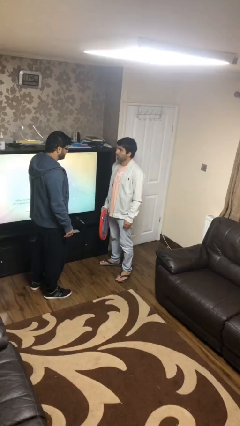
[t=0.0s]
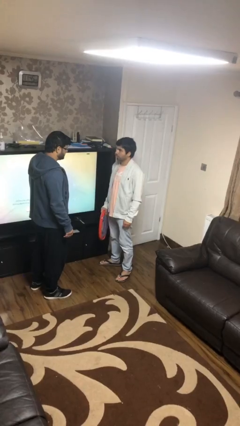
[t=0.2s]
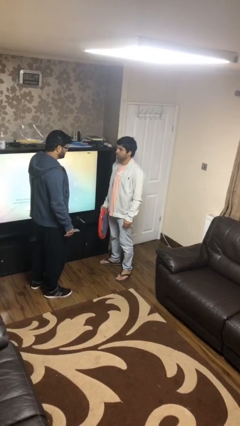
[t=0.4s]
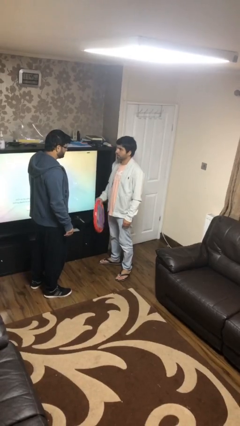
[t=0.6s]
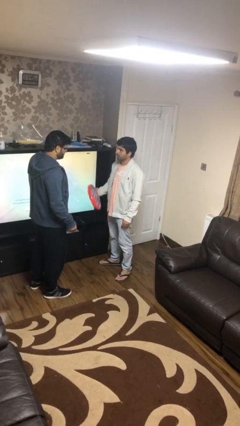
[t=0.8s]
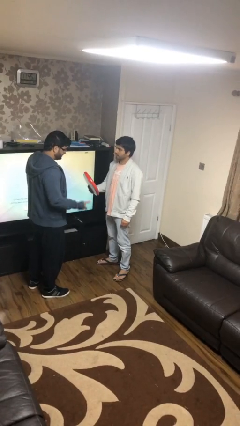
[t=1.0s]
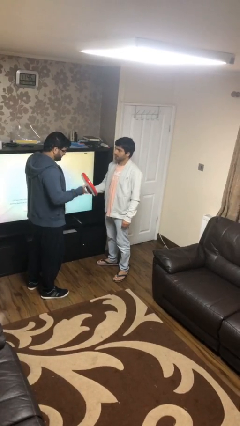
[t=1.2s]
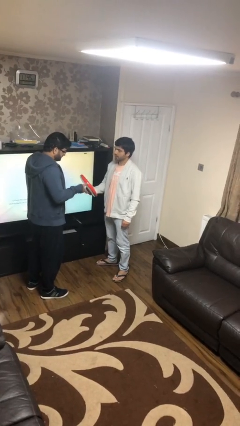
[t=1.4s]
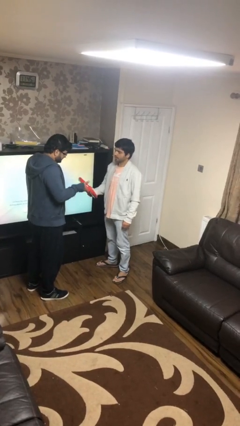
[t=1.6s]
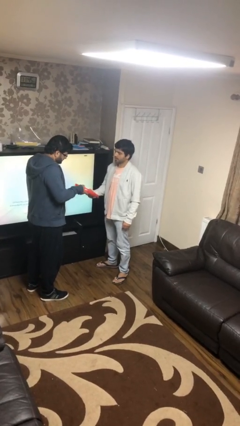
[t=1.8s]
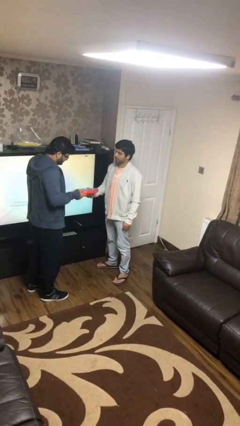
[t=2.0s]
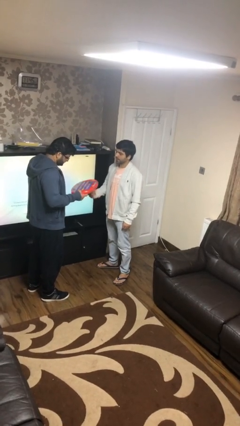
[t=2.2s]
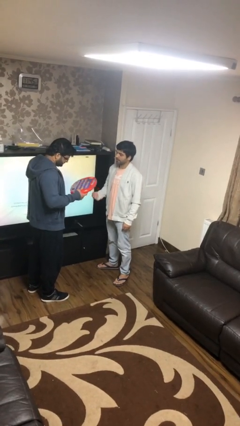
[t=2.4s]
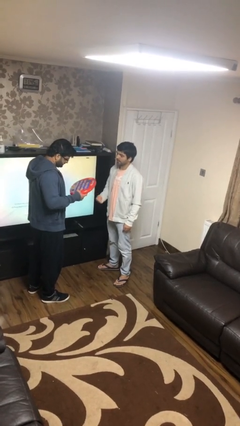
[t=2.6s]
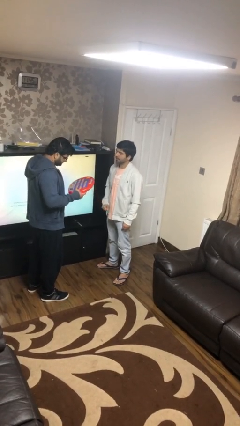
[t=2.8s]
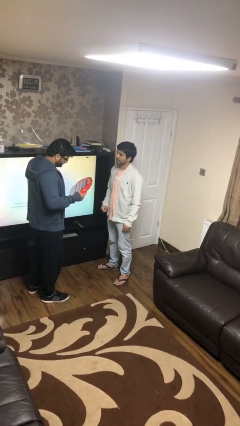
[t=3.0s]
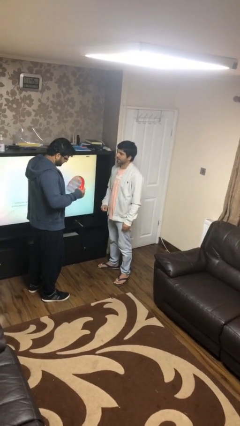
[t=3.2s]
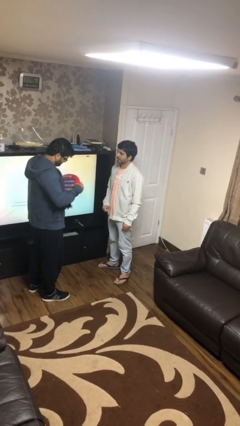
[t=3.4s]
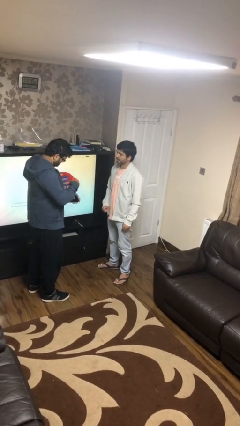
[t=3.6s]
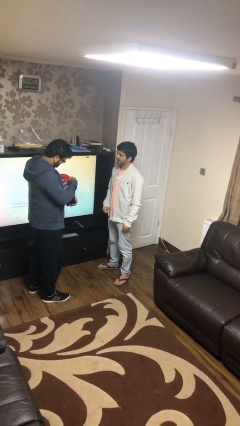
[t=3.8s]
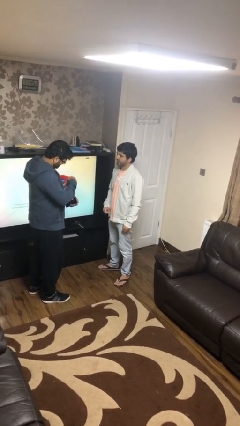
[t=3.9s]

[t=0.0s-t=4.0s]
person transfers object to person

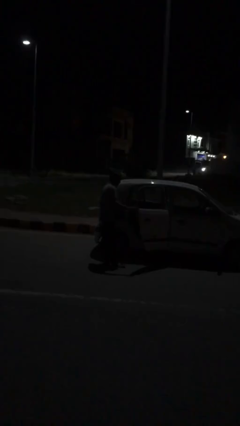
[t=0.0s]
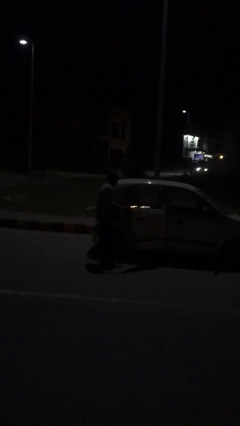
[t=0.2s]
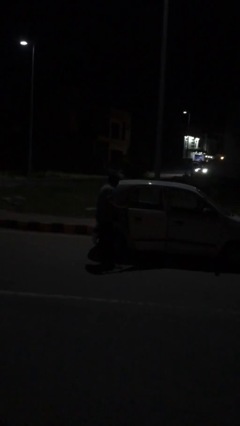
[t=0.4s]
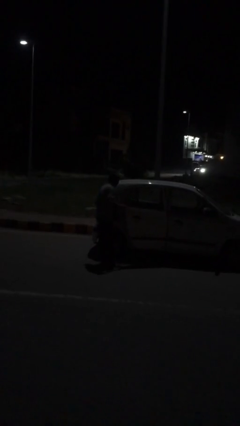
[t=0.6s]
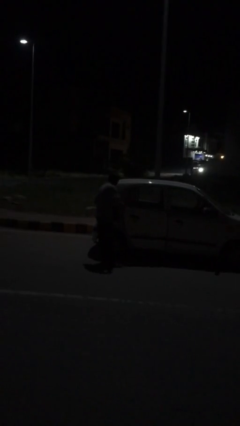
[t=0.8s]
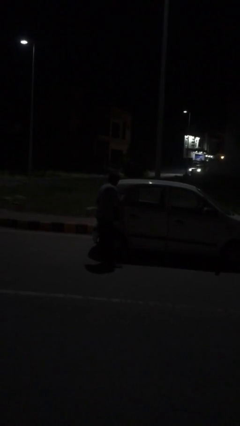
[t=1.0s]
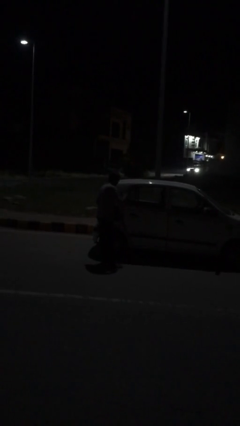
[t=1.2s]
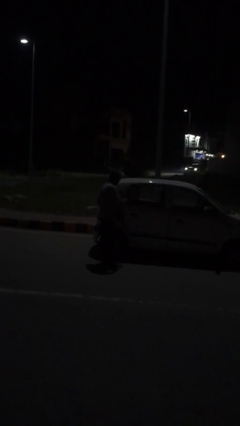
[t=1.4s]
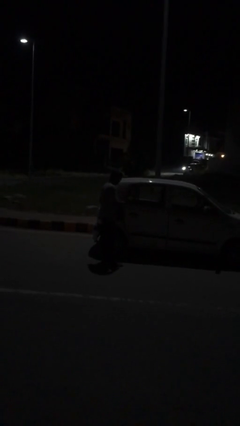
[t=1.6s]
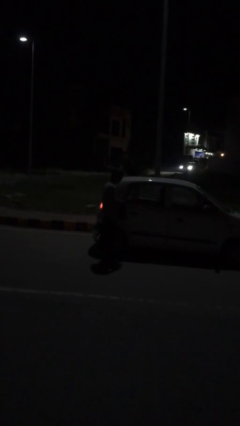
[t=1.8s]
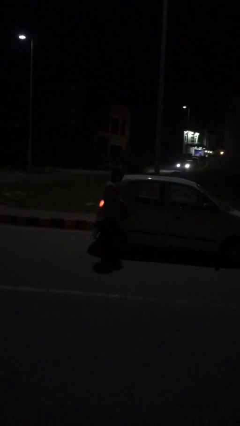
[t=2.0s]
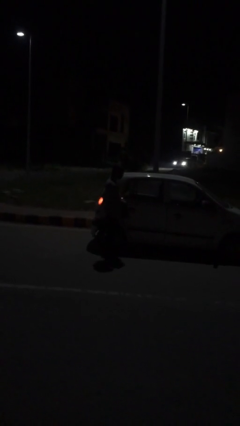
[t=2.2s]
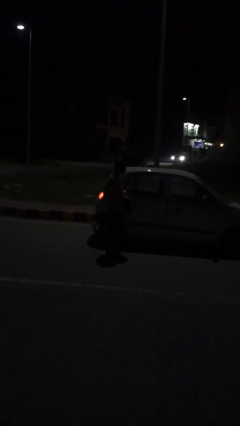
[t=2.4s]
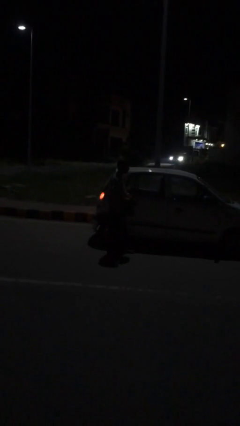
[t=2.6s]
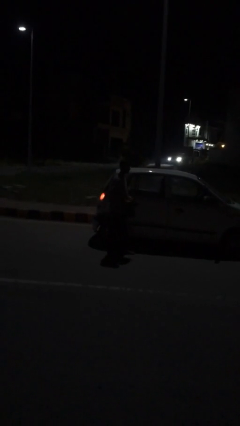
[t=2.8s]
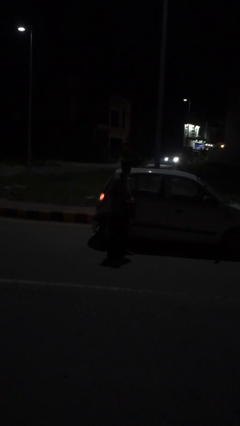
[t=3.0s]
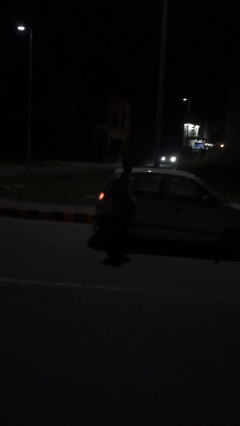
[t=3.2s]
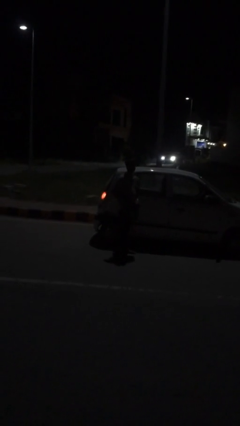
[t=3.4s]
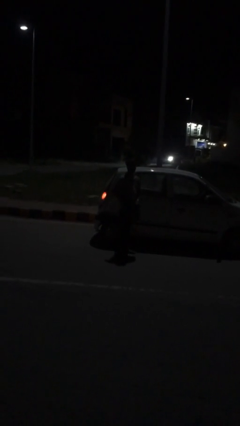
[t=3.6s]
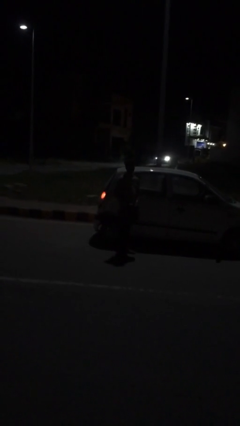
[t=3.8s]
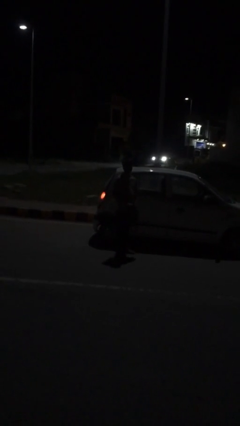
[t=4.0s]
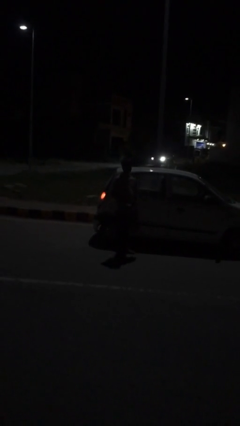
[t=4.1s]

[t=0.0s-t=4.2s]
person closes car door

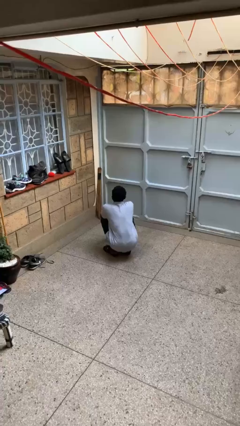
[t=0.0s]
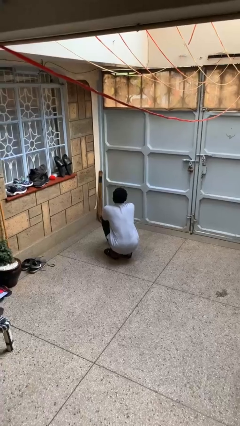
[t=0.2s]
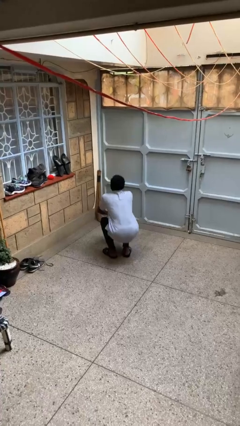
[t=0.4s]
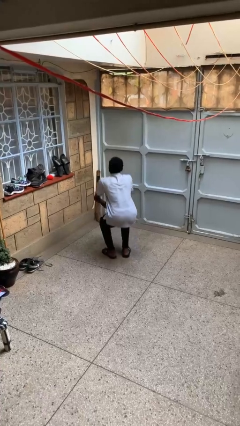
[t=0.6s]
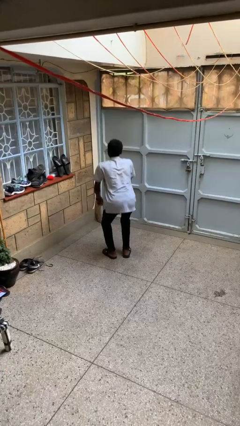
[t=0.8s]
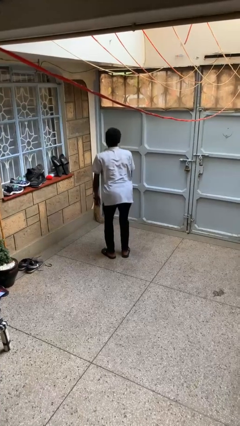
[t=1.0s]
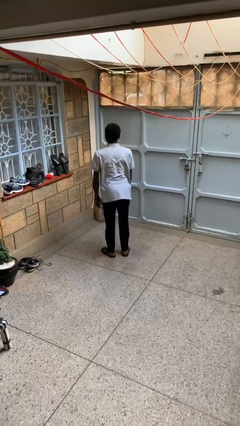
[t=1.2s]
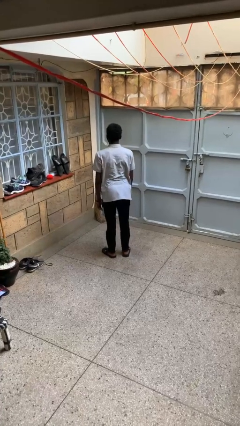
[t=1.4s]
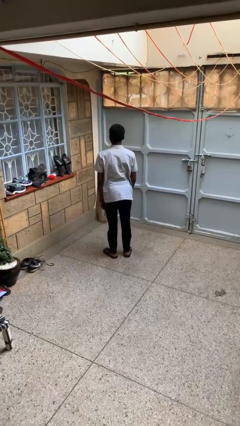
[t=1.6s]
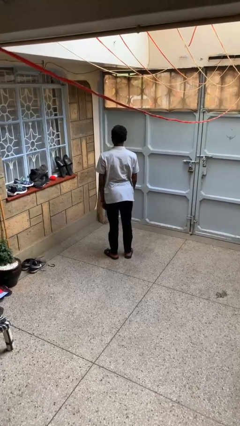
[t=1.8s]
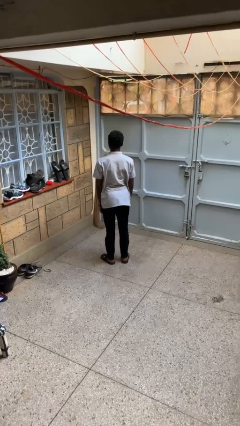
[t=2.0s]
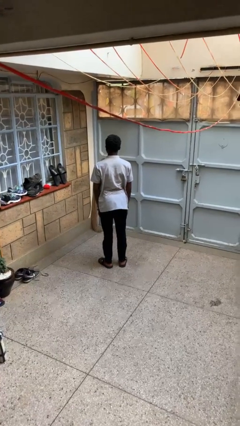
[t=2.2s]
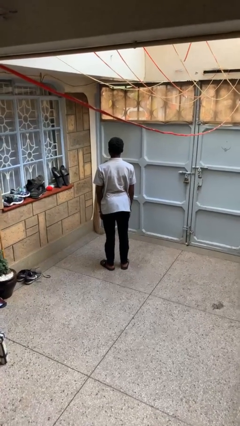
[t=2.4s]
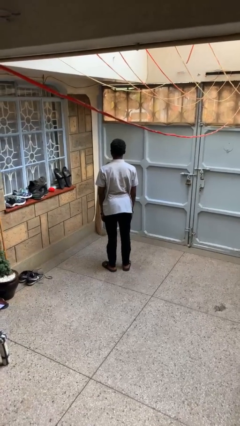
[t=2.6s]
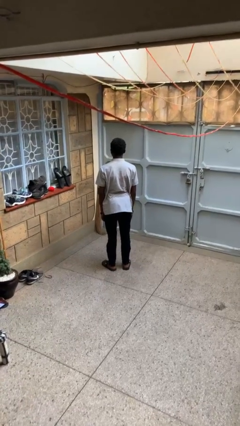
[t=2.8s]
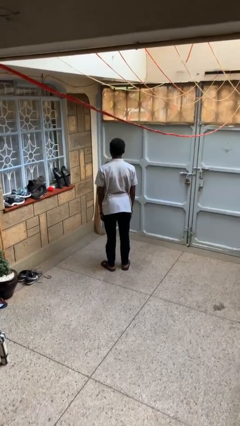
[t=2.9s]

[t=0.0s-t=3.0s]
person stands up

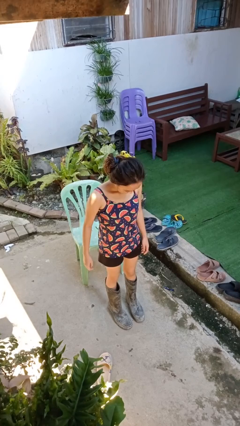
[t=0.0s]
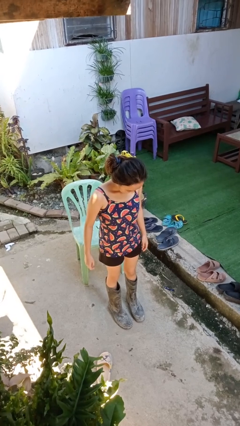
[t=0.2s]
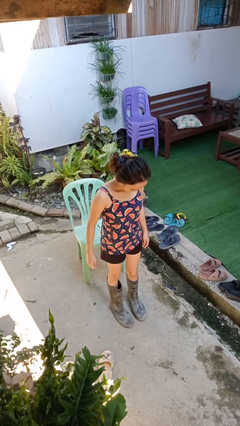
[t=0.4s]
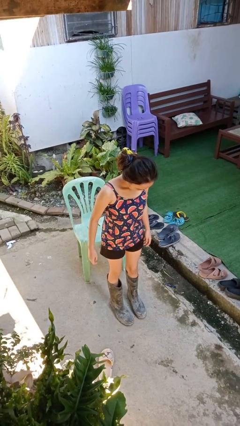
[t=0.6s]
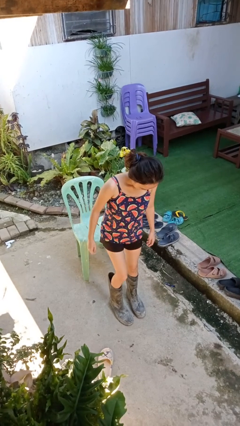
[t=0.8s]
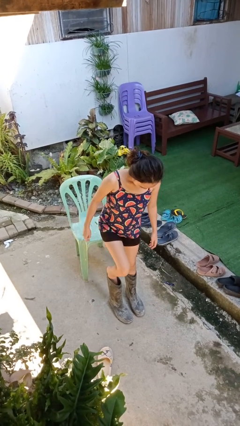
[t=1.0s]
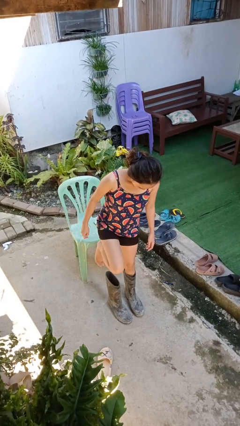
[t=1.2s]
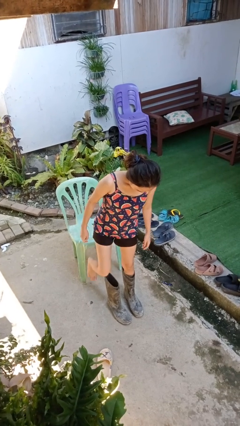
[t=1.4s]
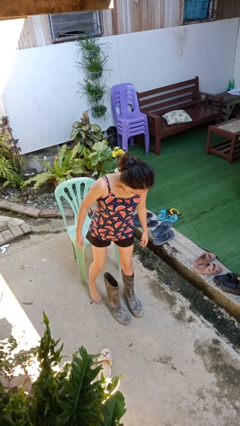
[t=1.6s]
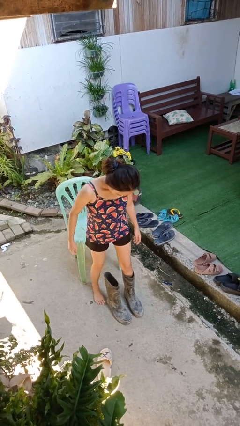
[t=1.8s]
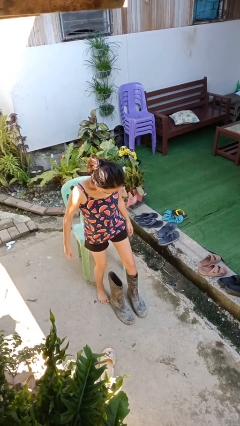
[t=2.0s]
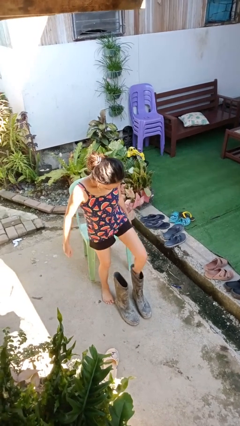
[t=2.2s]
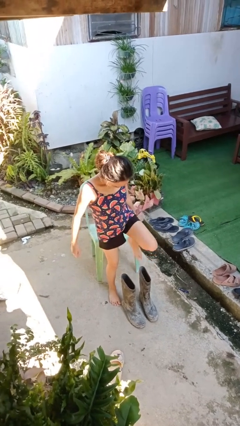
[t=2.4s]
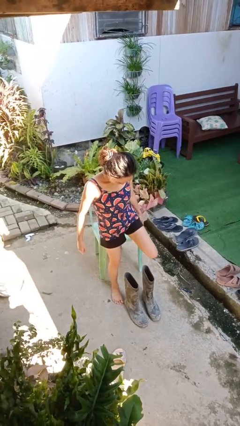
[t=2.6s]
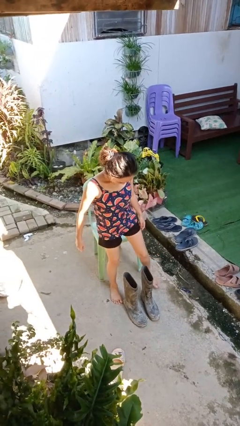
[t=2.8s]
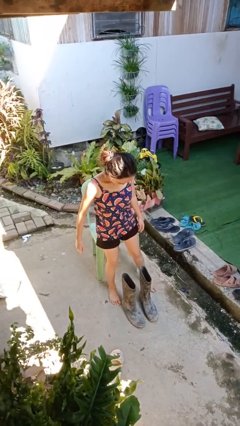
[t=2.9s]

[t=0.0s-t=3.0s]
person takes off boots

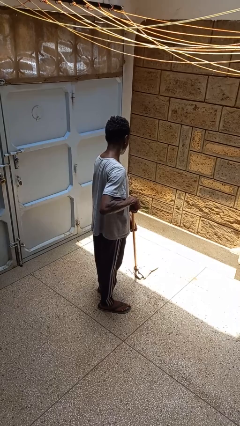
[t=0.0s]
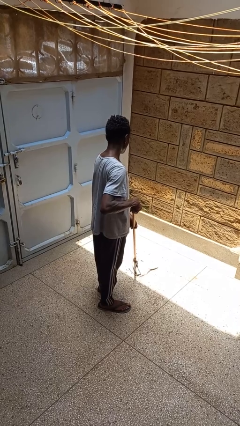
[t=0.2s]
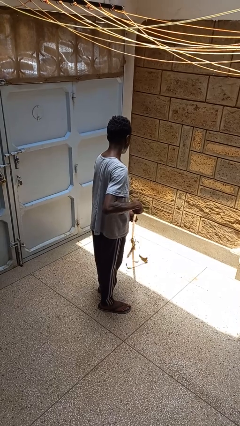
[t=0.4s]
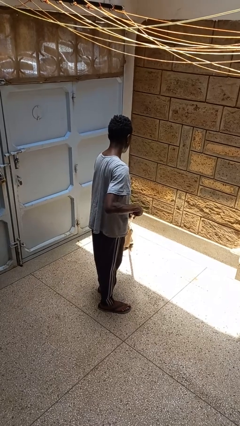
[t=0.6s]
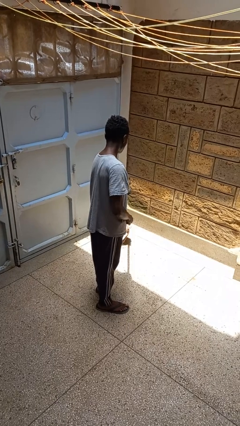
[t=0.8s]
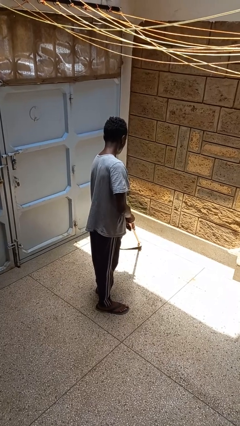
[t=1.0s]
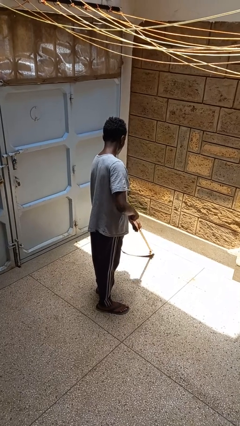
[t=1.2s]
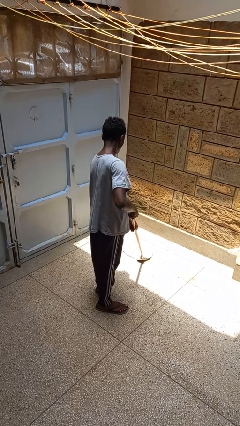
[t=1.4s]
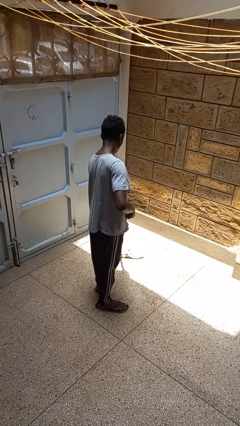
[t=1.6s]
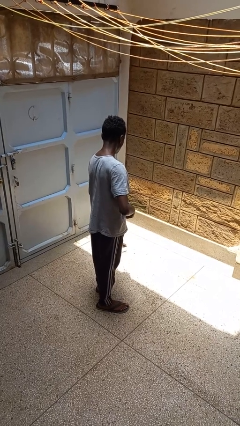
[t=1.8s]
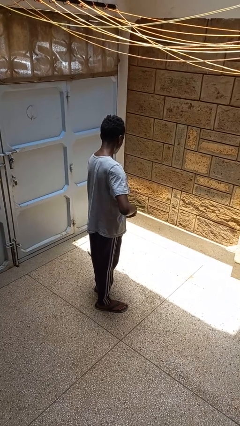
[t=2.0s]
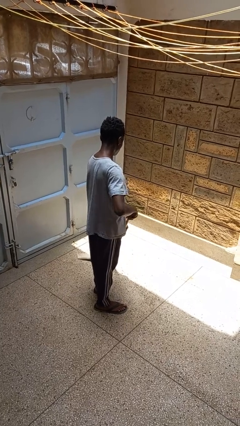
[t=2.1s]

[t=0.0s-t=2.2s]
person mops

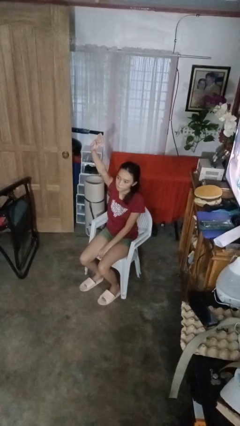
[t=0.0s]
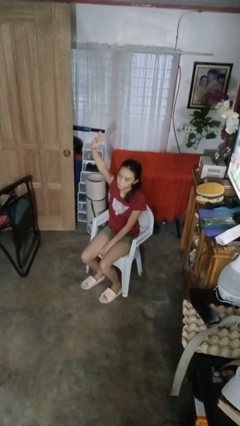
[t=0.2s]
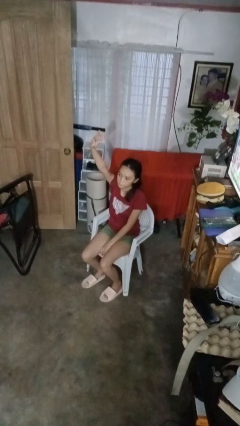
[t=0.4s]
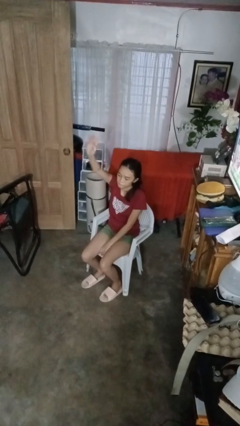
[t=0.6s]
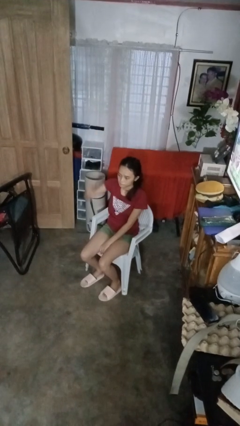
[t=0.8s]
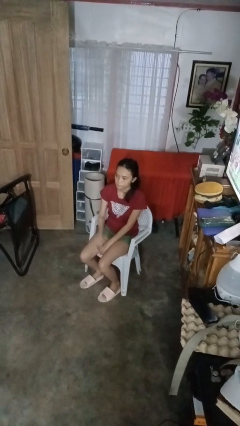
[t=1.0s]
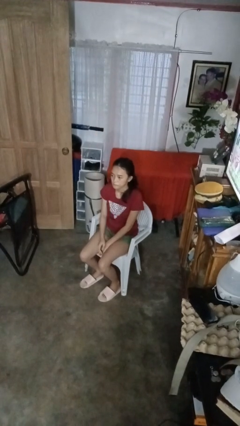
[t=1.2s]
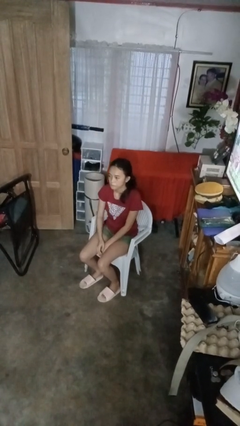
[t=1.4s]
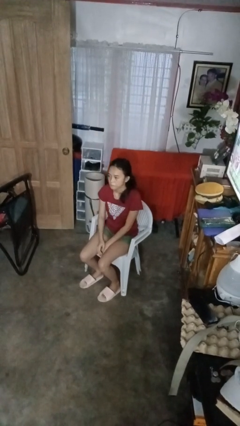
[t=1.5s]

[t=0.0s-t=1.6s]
person gestures lower hand
